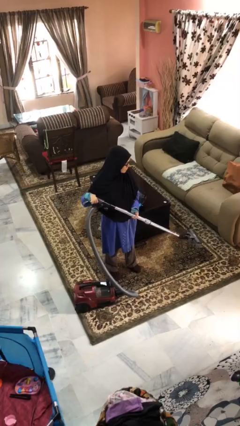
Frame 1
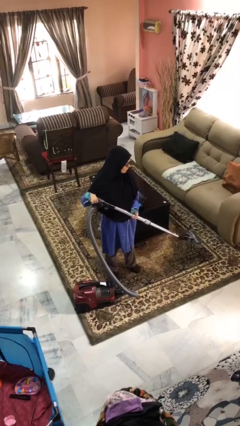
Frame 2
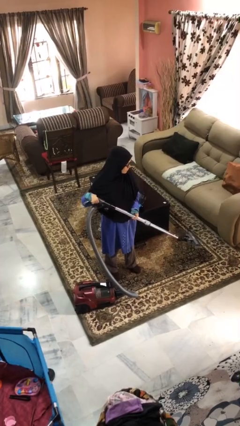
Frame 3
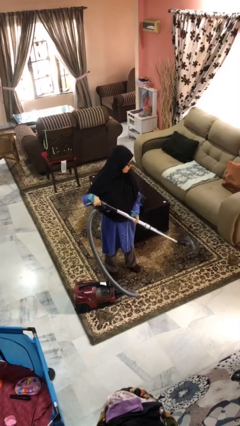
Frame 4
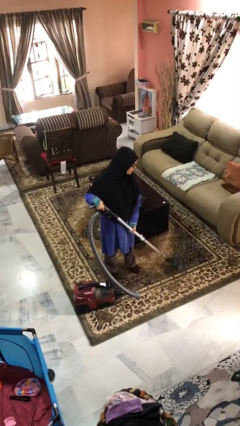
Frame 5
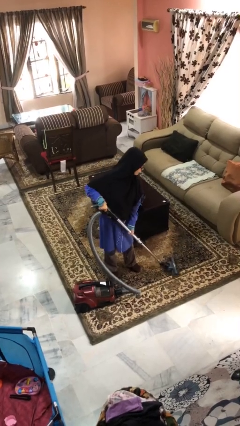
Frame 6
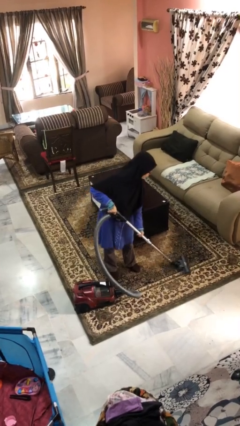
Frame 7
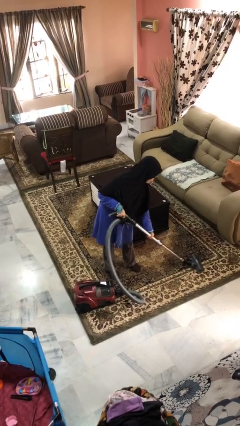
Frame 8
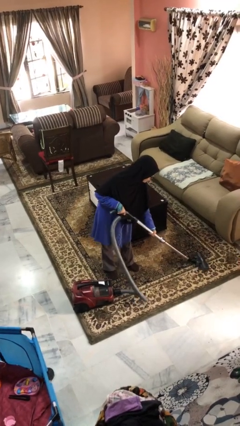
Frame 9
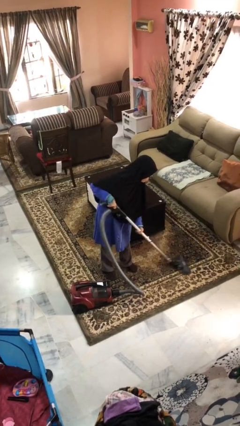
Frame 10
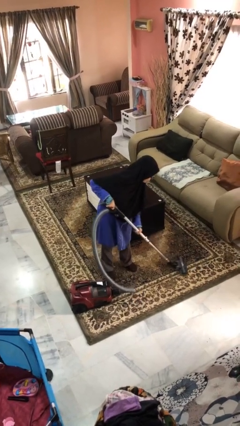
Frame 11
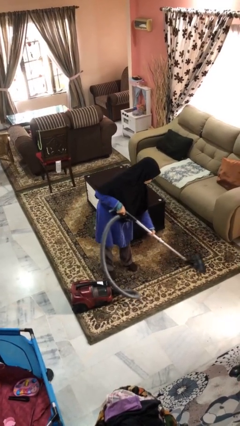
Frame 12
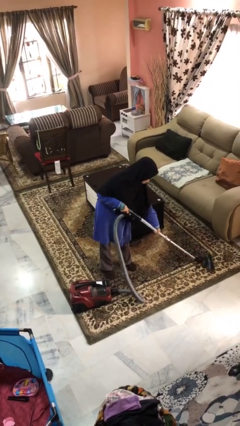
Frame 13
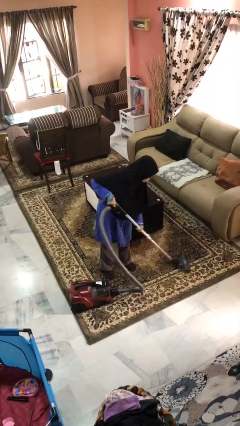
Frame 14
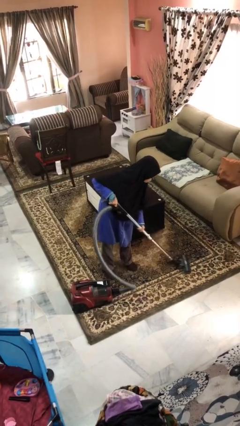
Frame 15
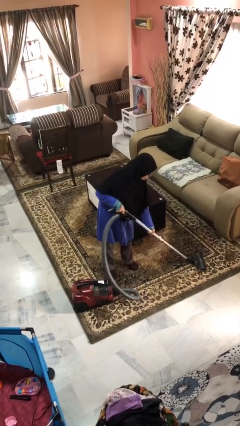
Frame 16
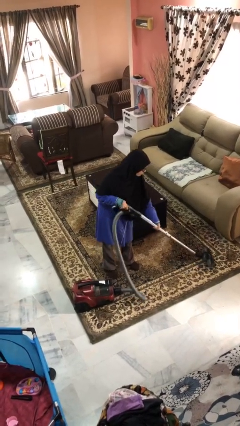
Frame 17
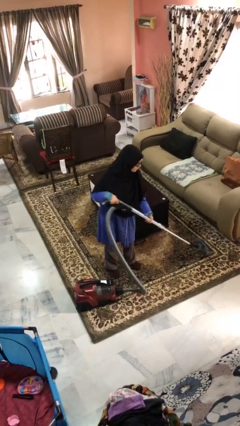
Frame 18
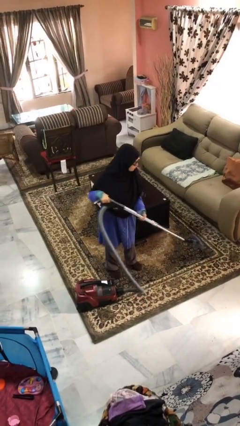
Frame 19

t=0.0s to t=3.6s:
person vacuums carpet

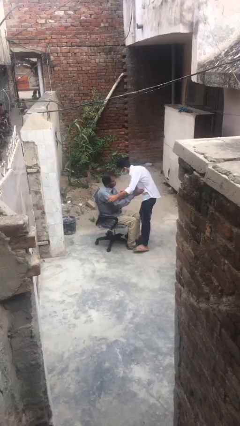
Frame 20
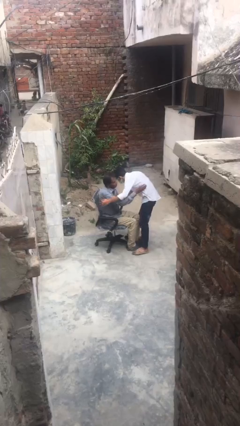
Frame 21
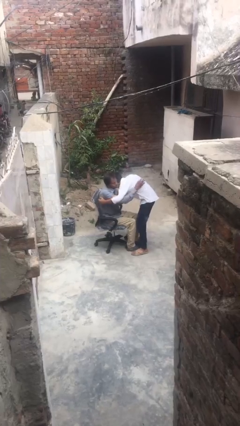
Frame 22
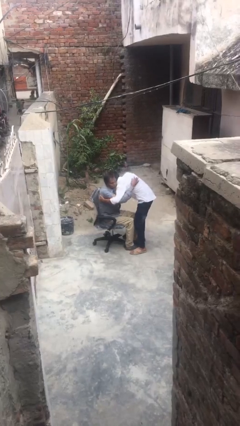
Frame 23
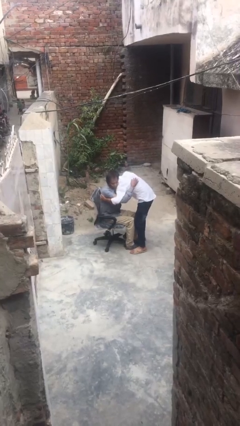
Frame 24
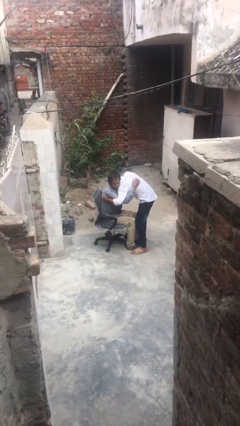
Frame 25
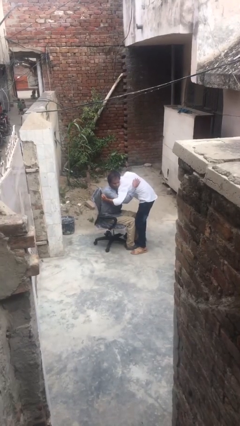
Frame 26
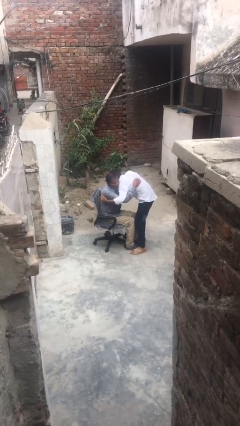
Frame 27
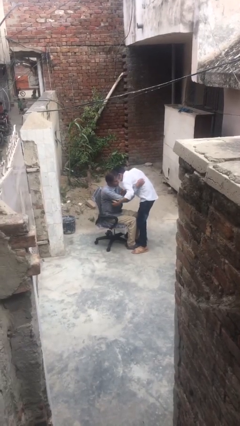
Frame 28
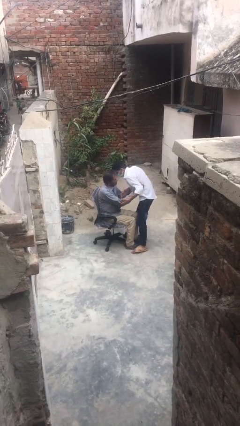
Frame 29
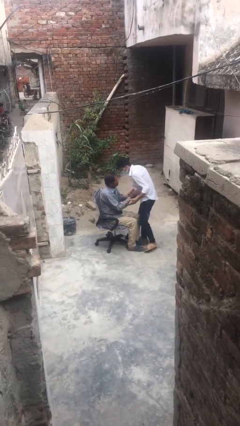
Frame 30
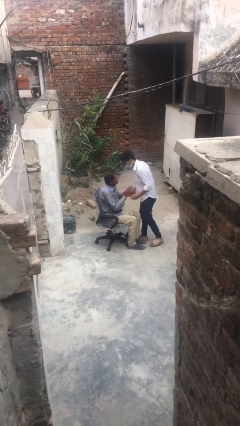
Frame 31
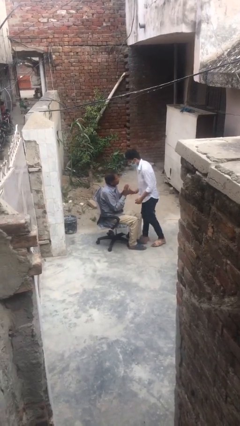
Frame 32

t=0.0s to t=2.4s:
person embraces person

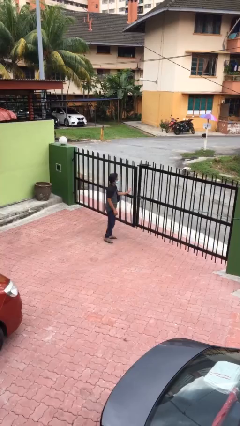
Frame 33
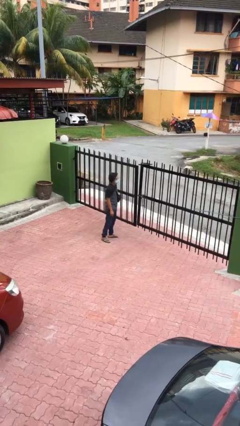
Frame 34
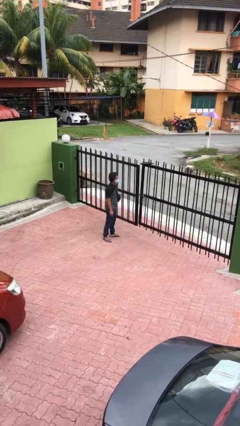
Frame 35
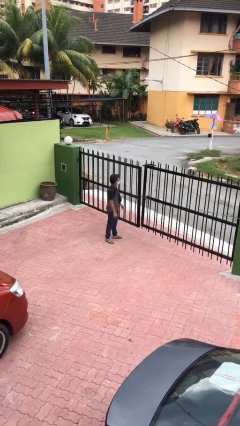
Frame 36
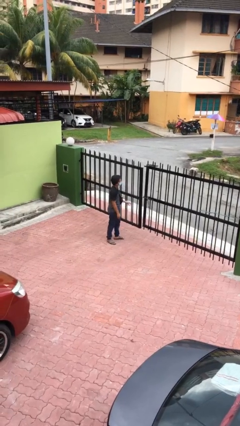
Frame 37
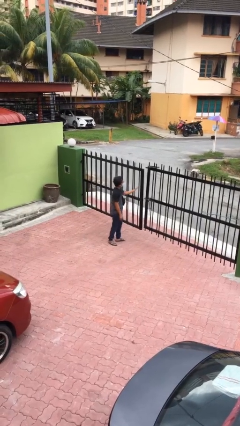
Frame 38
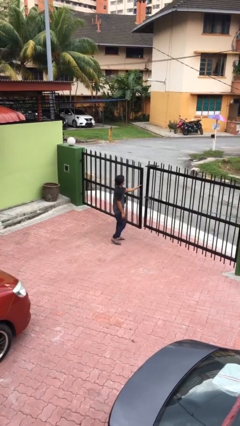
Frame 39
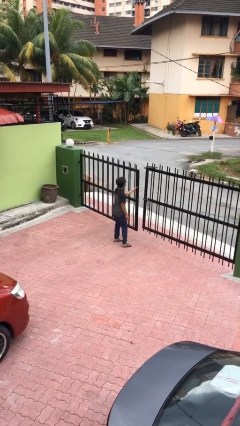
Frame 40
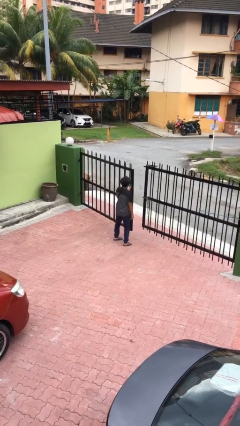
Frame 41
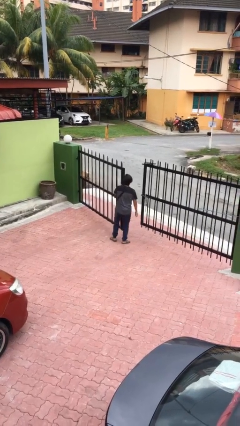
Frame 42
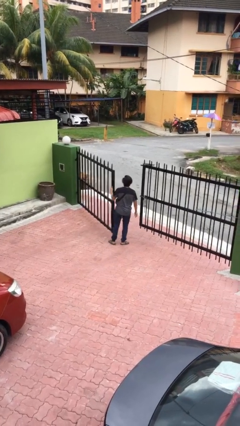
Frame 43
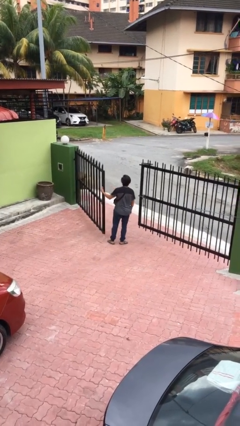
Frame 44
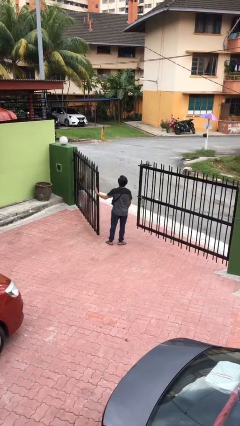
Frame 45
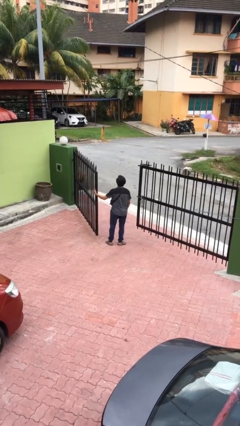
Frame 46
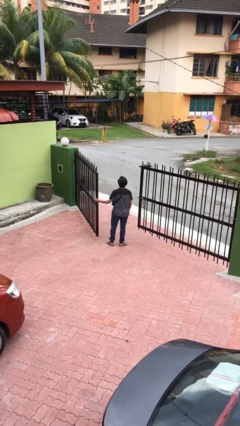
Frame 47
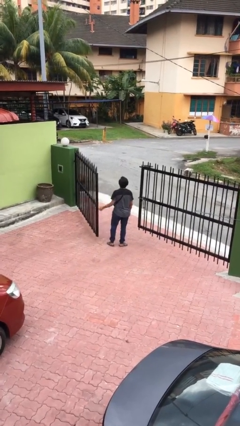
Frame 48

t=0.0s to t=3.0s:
person opens facility door

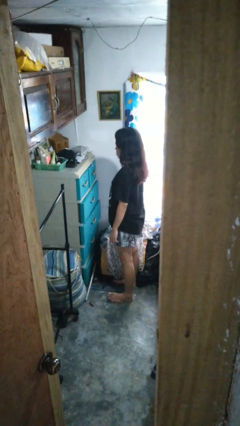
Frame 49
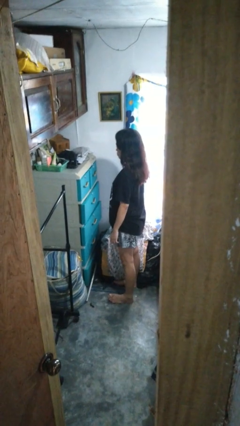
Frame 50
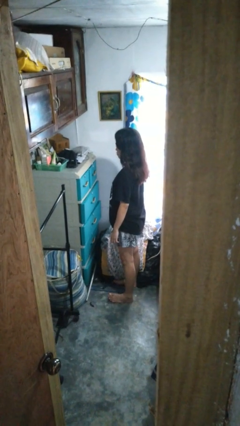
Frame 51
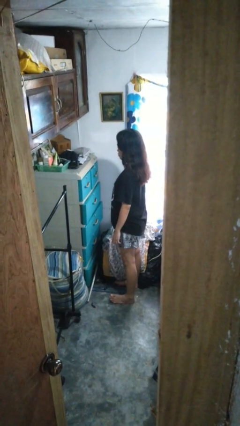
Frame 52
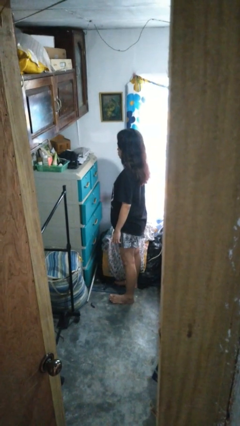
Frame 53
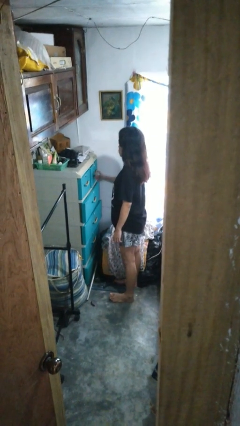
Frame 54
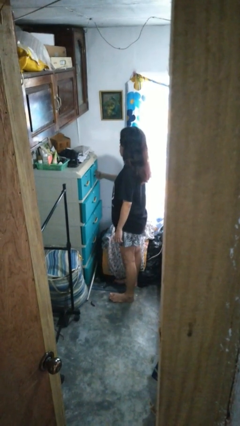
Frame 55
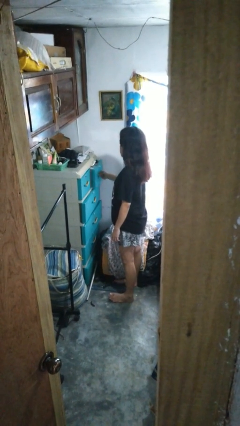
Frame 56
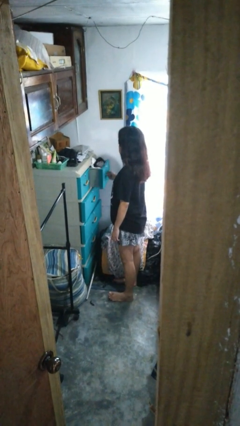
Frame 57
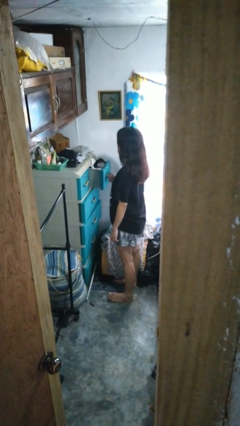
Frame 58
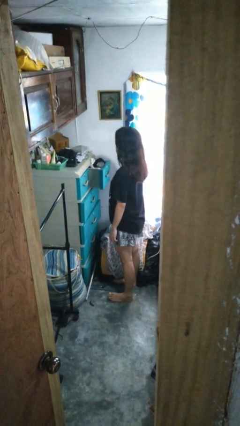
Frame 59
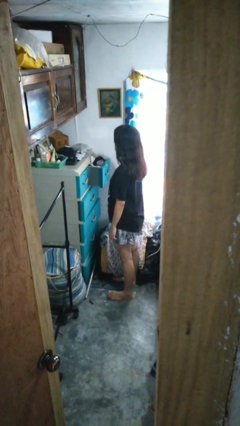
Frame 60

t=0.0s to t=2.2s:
person opens dresser drawer

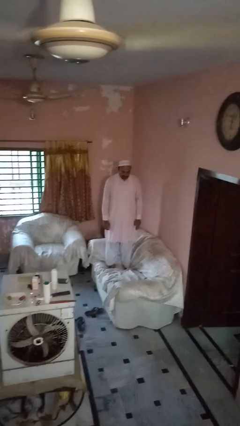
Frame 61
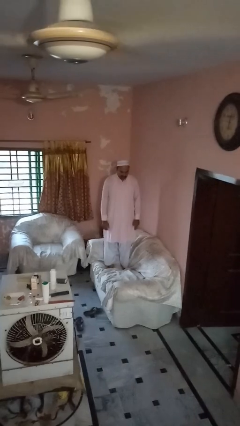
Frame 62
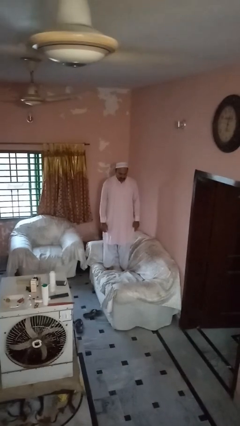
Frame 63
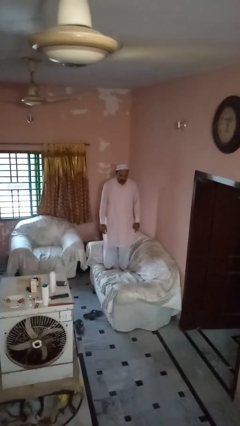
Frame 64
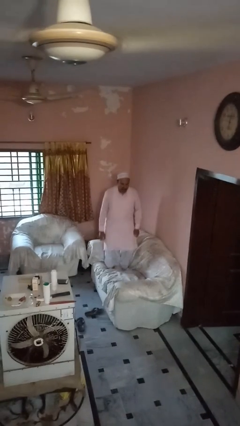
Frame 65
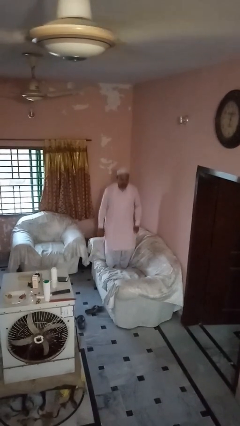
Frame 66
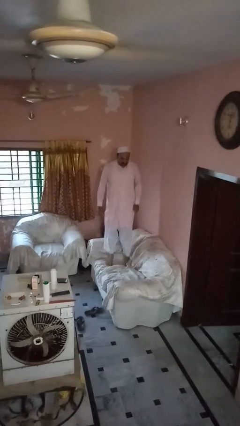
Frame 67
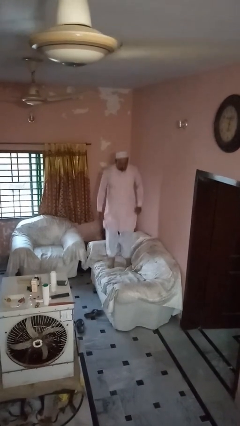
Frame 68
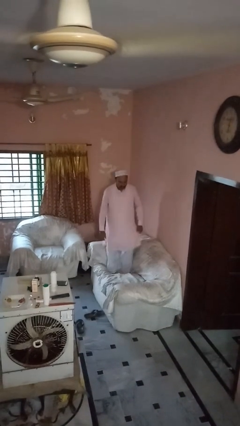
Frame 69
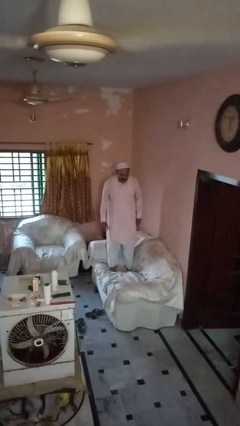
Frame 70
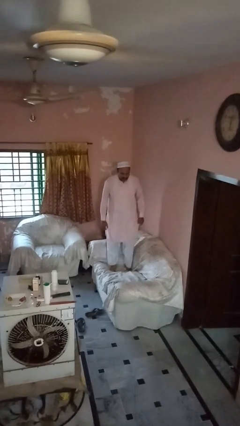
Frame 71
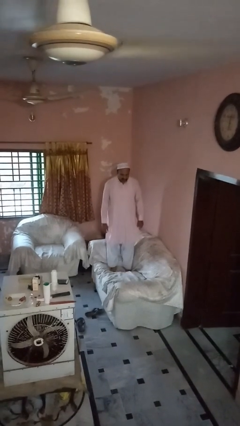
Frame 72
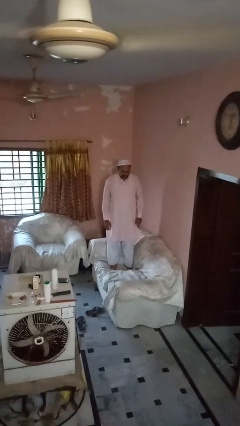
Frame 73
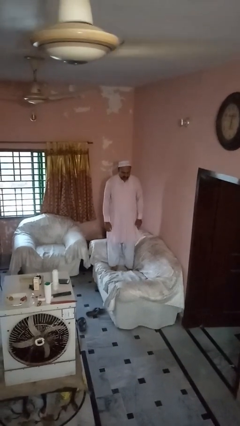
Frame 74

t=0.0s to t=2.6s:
person jumps on couch

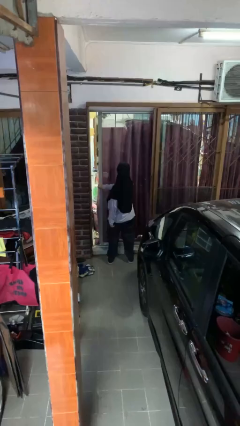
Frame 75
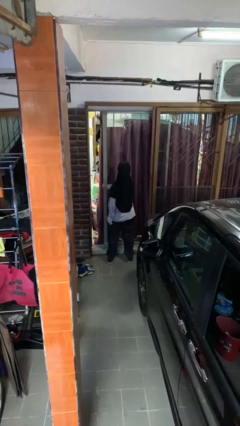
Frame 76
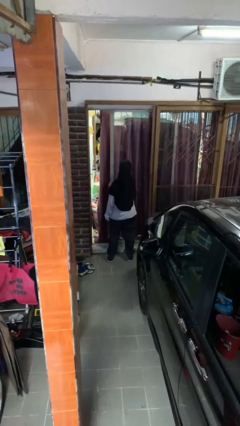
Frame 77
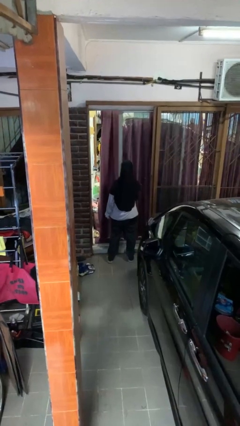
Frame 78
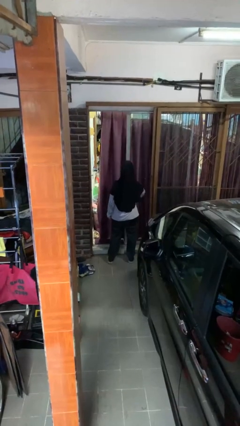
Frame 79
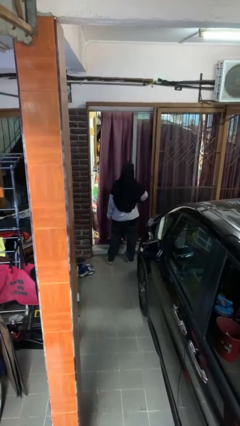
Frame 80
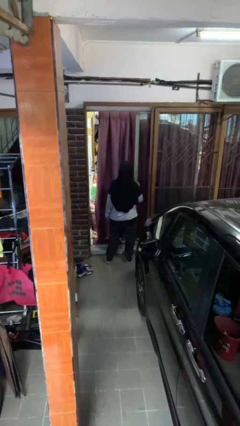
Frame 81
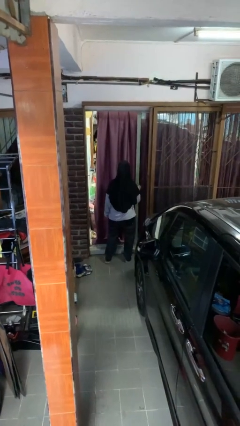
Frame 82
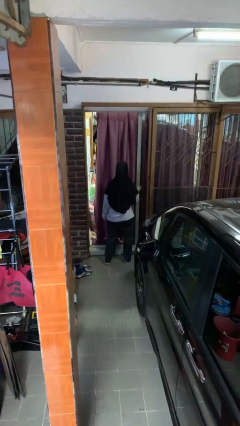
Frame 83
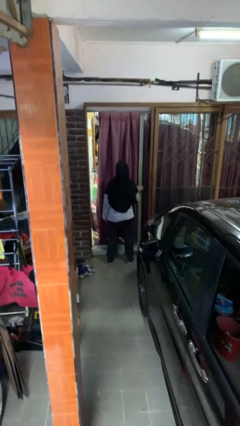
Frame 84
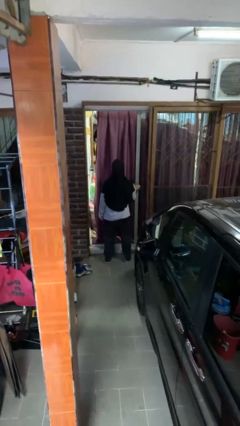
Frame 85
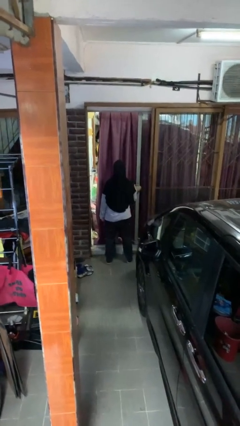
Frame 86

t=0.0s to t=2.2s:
person opens sliding door

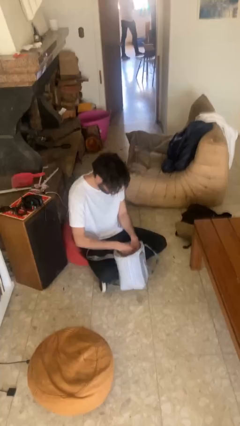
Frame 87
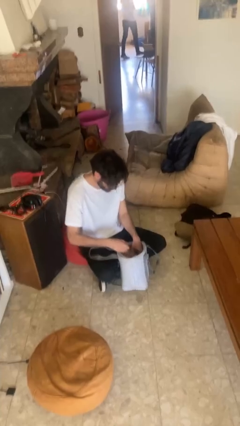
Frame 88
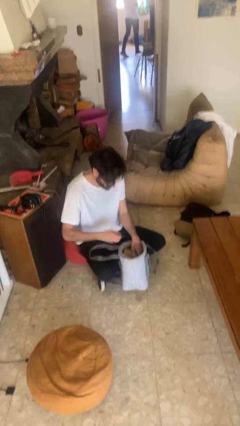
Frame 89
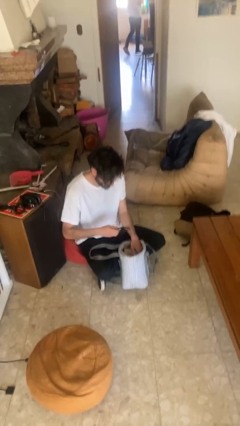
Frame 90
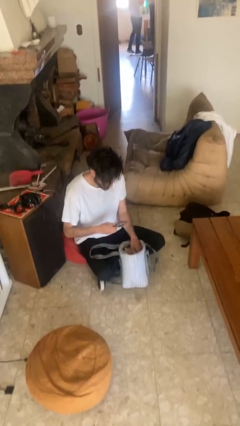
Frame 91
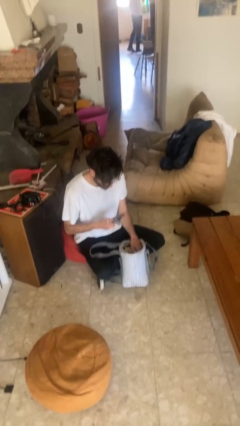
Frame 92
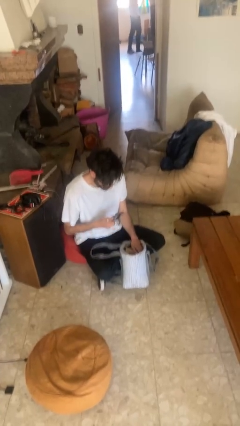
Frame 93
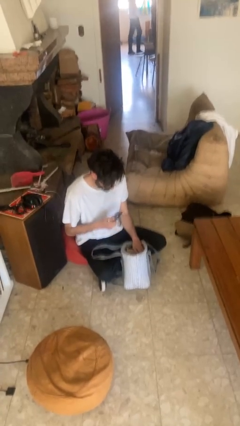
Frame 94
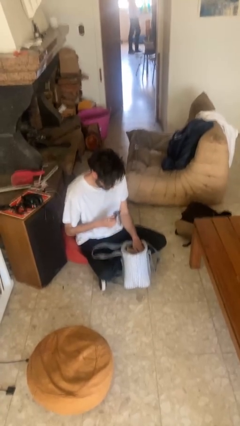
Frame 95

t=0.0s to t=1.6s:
person takes object from purse
